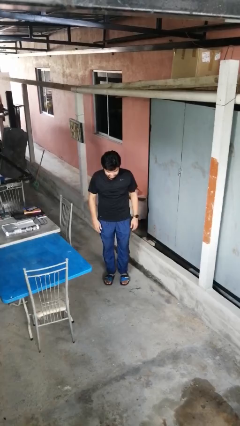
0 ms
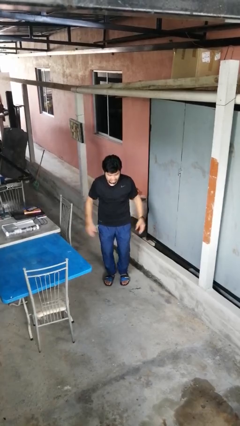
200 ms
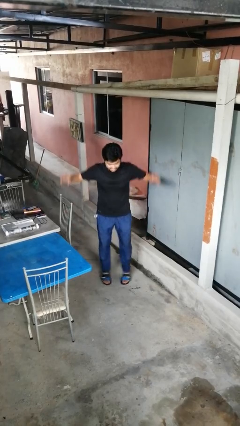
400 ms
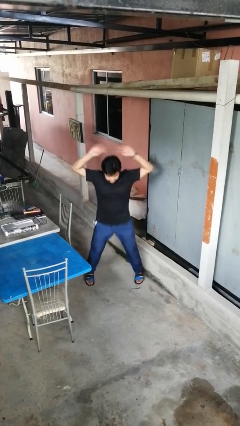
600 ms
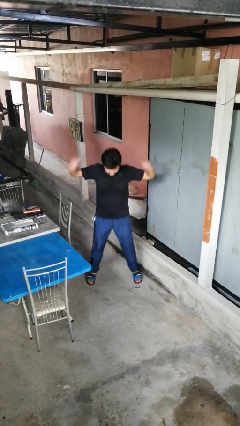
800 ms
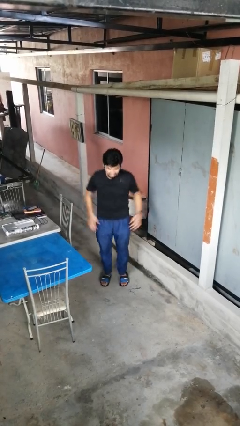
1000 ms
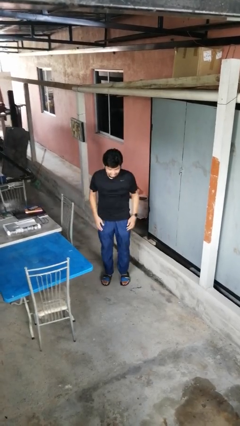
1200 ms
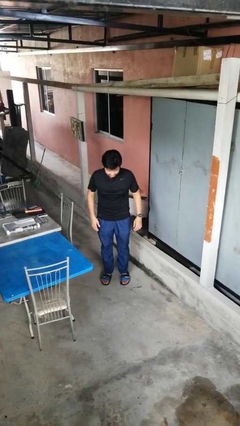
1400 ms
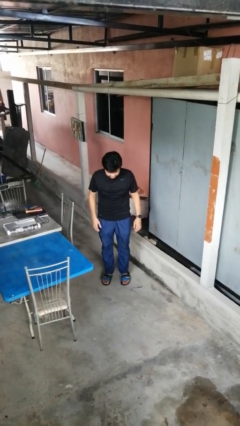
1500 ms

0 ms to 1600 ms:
person exercises with jumping jacks

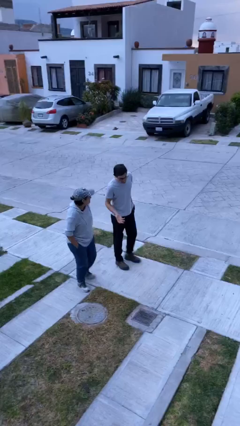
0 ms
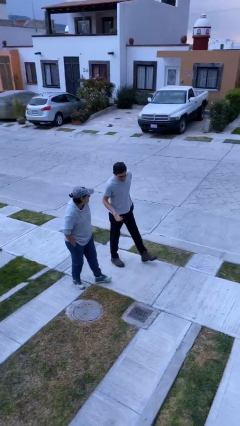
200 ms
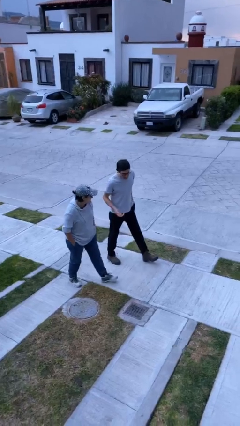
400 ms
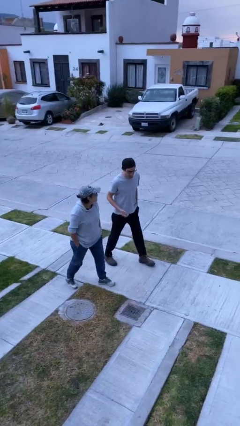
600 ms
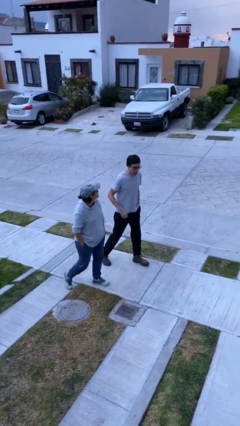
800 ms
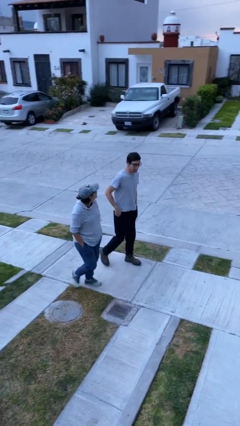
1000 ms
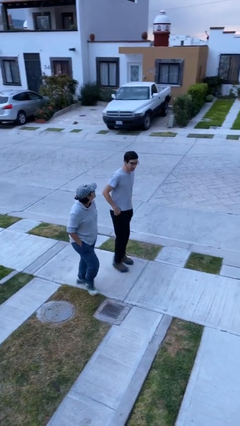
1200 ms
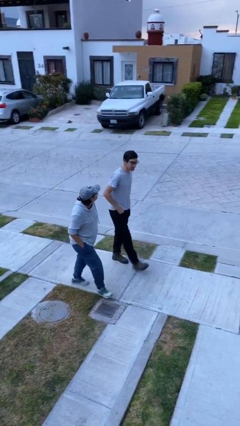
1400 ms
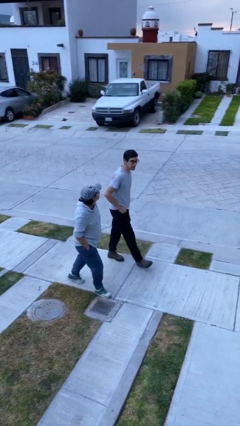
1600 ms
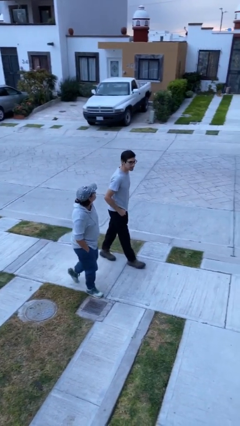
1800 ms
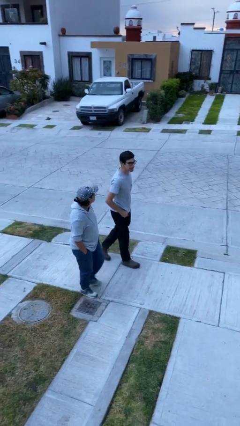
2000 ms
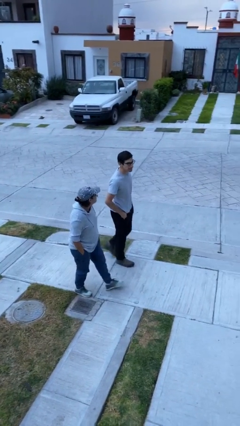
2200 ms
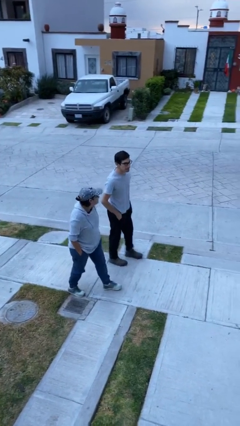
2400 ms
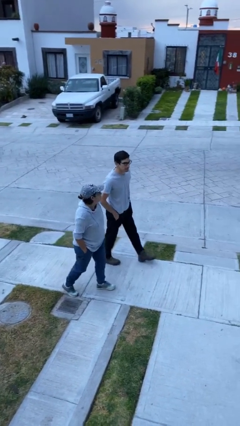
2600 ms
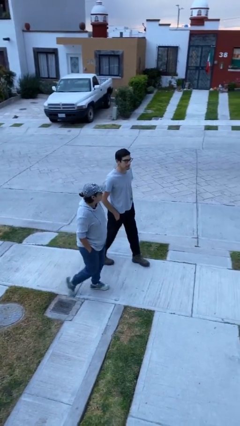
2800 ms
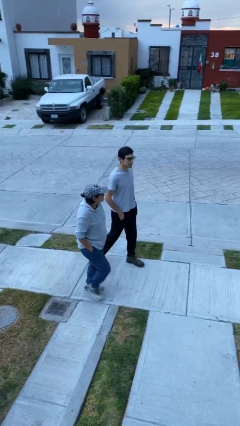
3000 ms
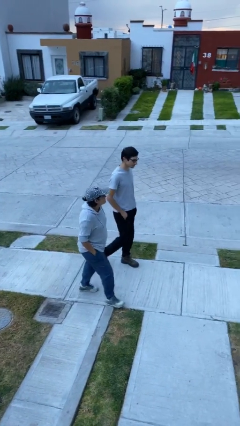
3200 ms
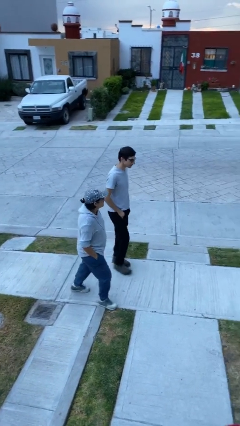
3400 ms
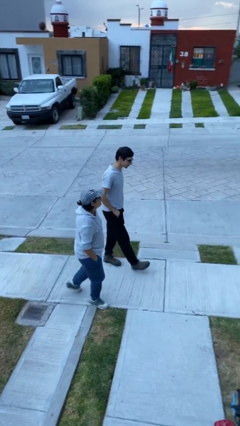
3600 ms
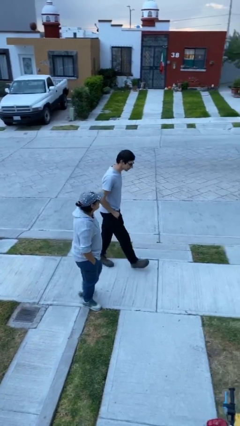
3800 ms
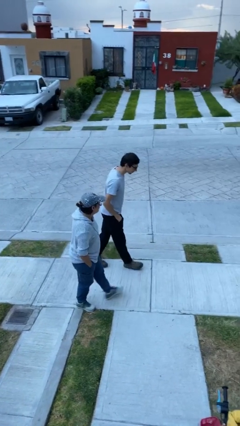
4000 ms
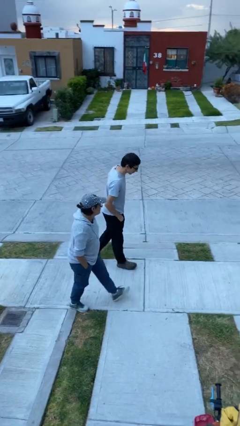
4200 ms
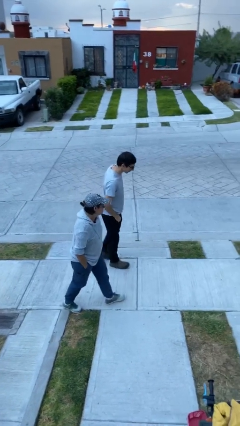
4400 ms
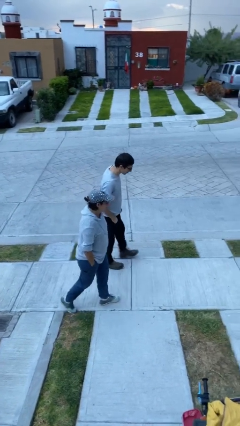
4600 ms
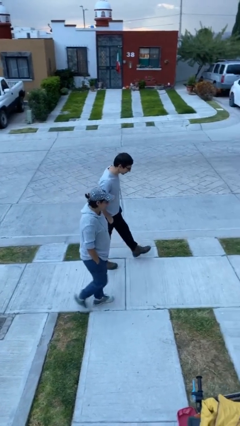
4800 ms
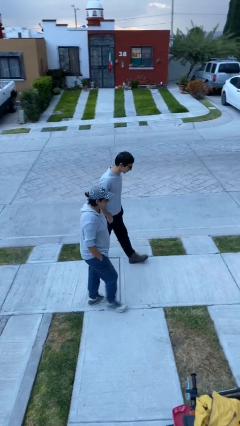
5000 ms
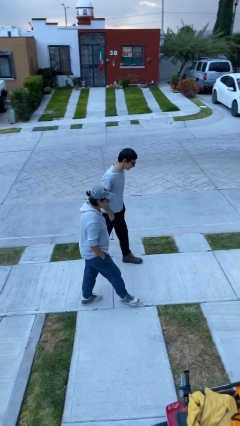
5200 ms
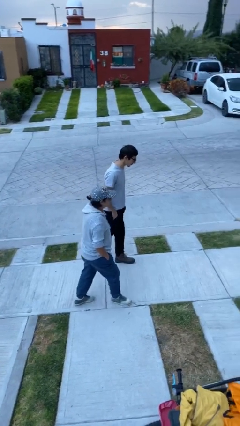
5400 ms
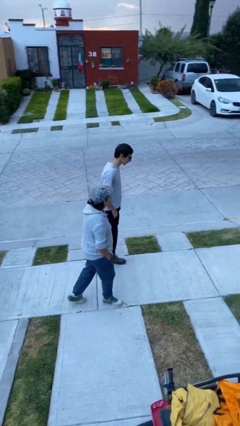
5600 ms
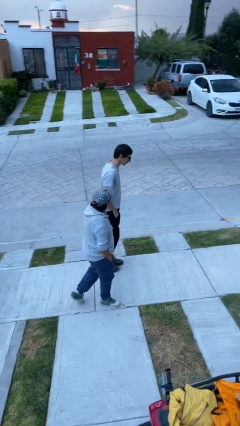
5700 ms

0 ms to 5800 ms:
person talks to person

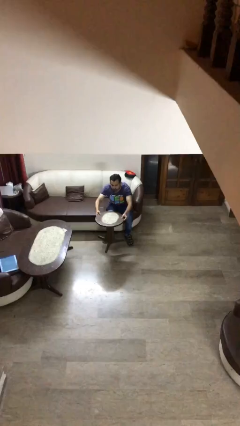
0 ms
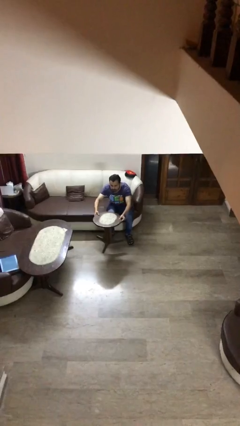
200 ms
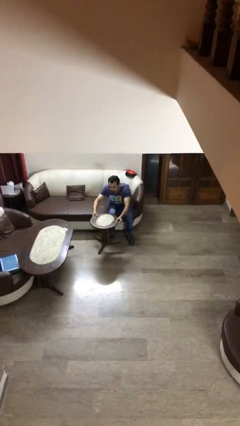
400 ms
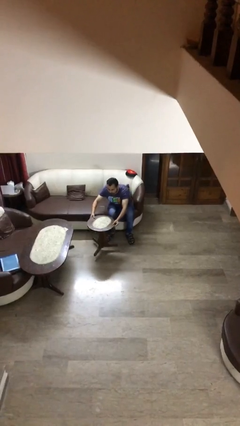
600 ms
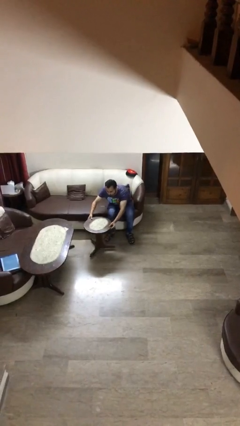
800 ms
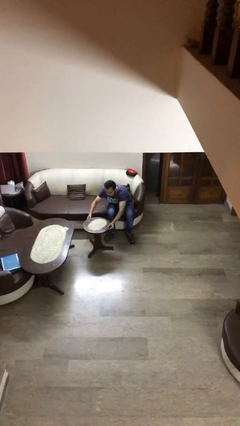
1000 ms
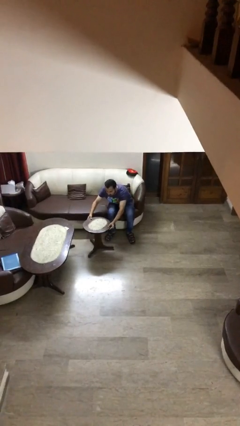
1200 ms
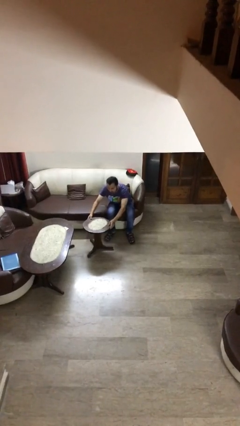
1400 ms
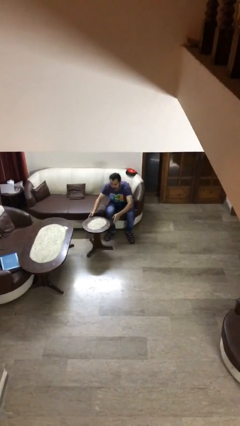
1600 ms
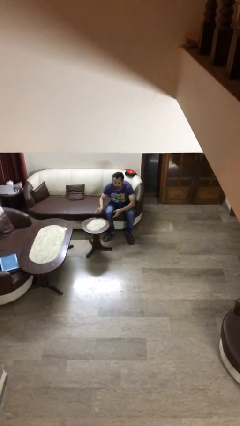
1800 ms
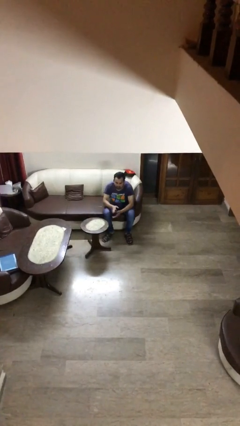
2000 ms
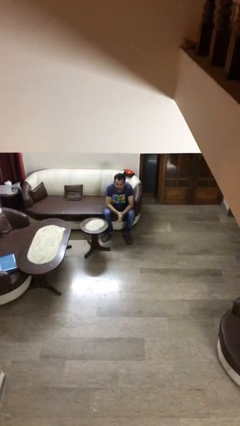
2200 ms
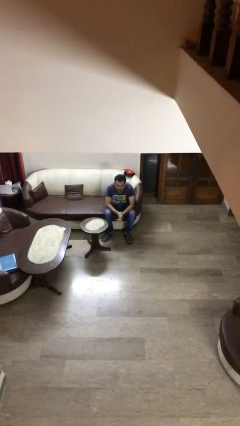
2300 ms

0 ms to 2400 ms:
person puts down object on floor

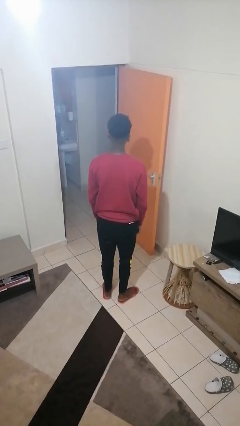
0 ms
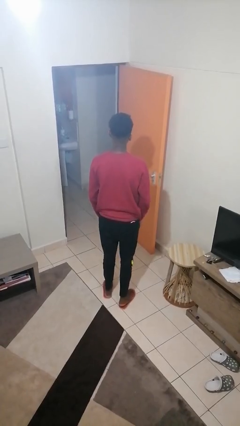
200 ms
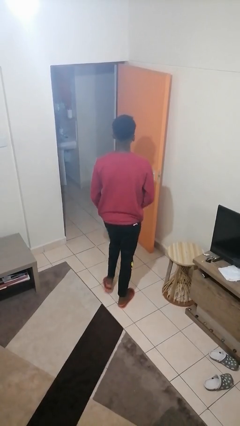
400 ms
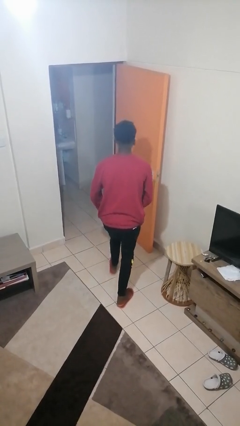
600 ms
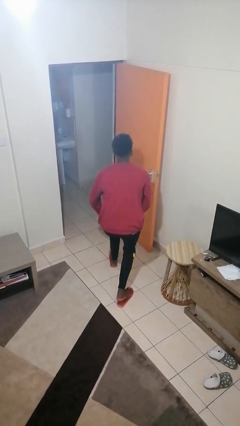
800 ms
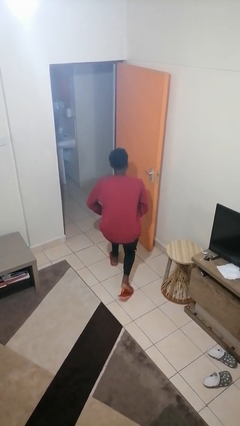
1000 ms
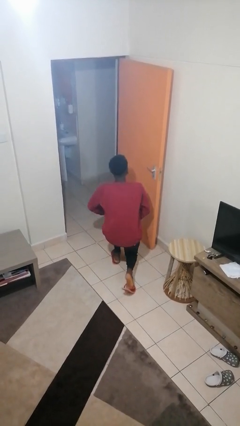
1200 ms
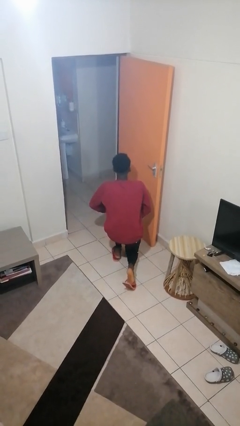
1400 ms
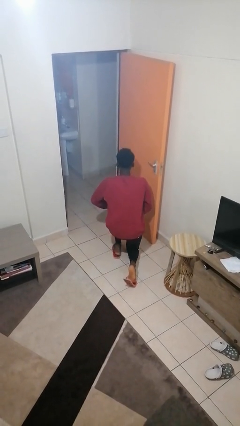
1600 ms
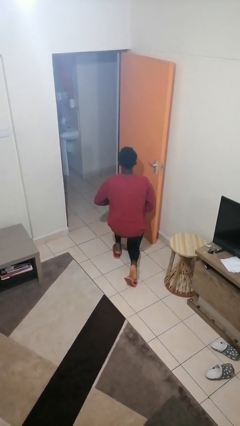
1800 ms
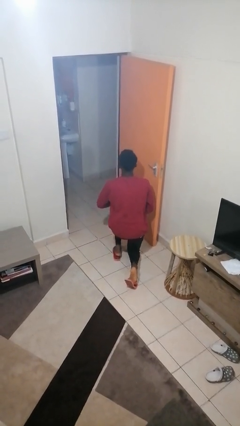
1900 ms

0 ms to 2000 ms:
person kneels

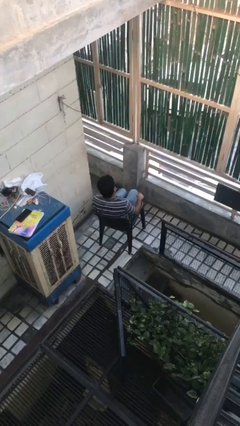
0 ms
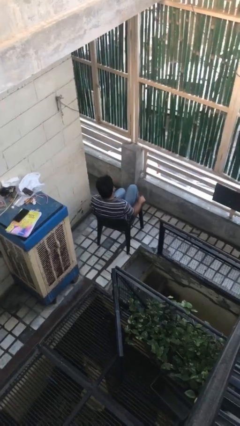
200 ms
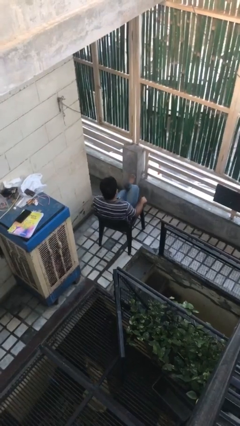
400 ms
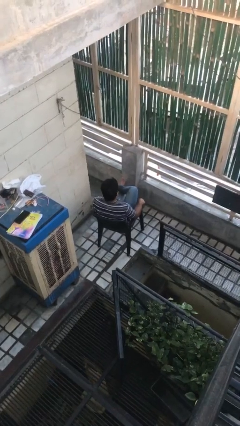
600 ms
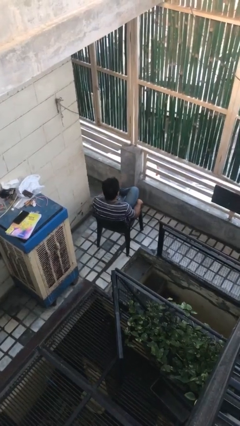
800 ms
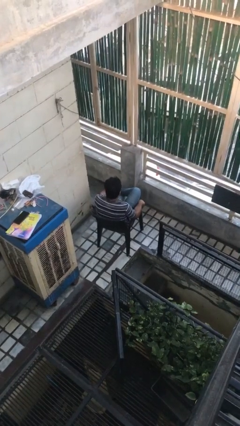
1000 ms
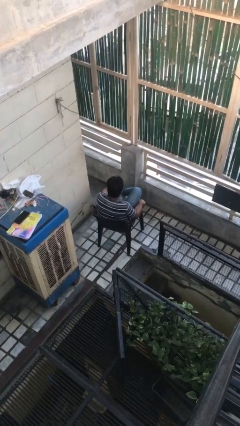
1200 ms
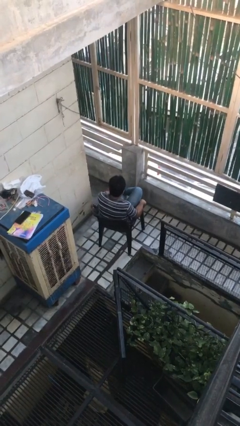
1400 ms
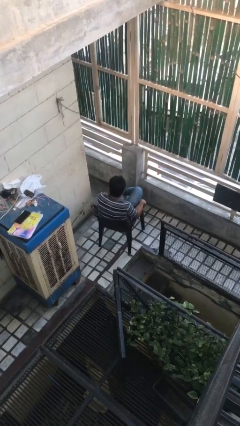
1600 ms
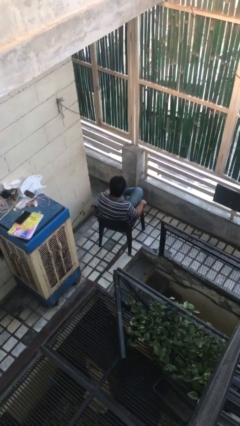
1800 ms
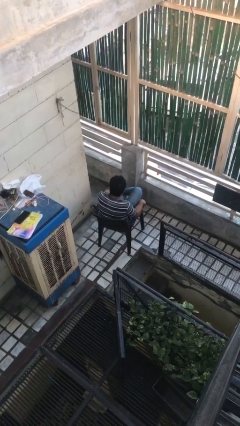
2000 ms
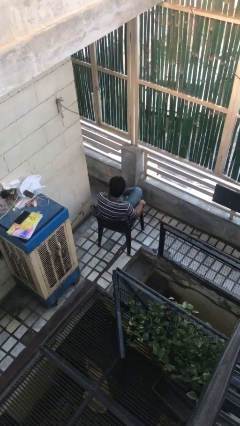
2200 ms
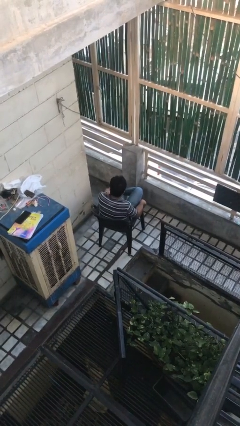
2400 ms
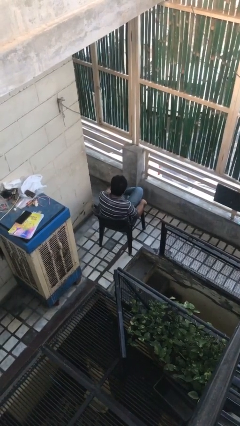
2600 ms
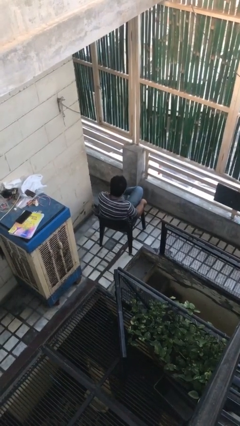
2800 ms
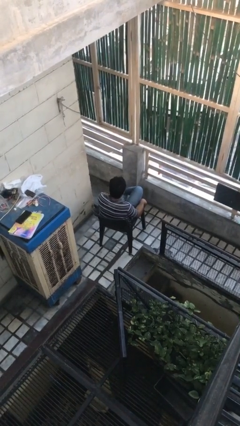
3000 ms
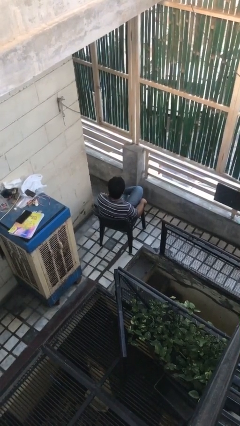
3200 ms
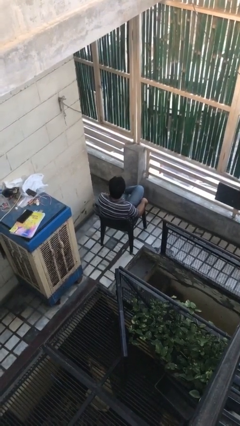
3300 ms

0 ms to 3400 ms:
person rubs foot

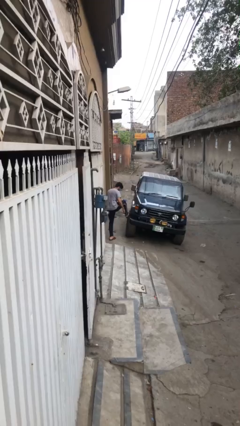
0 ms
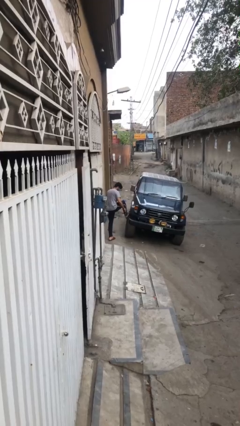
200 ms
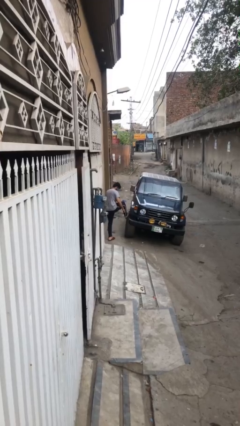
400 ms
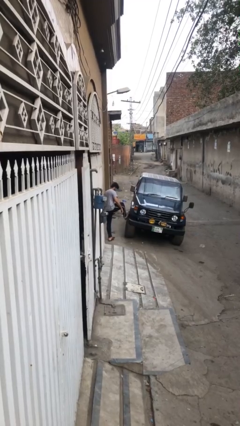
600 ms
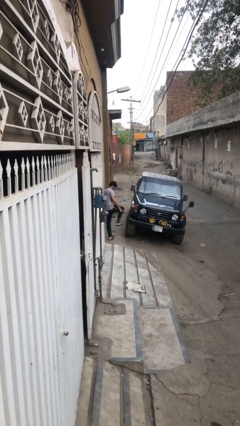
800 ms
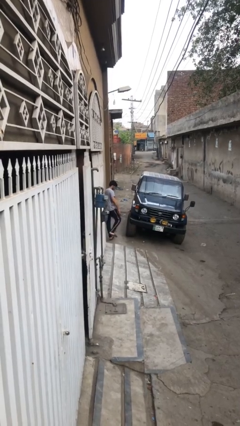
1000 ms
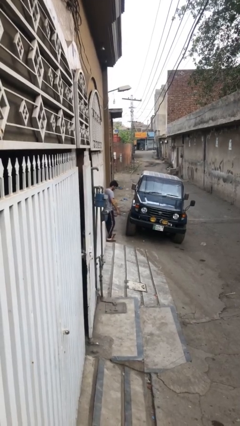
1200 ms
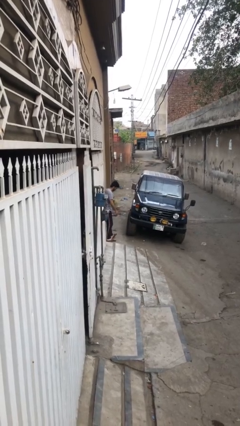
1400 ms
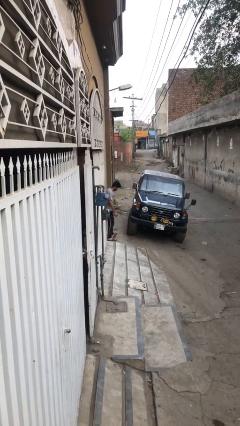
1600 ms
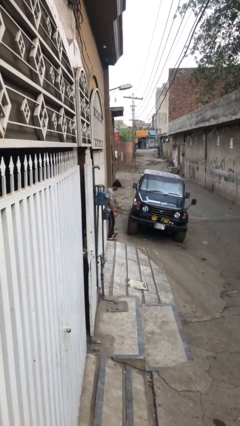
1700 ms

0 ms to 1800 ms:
person kicks car tires
